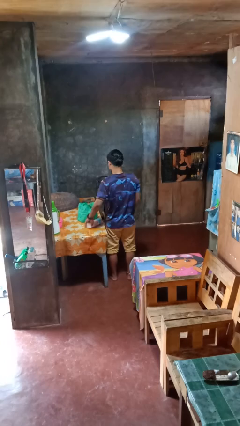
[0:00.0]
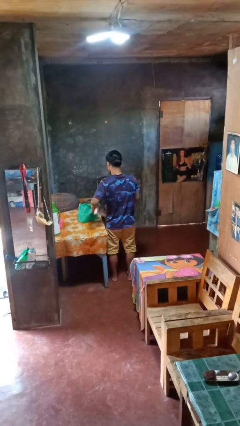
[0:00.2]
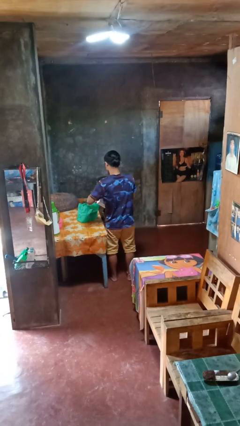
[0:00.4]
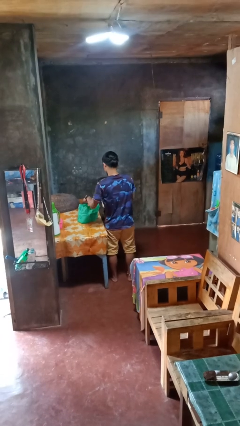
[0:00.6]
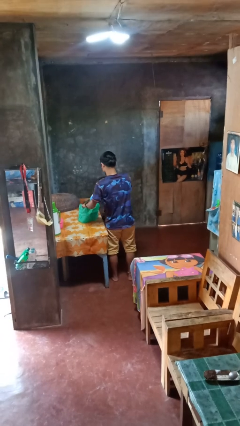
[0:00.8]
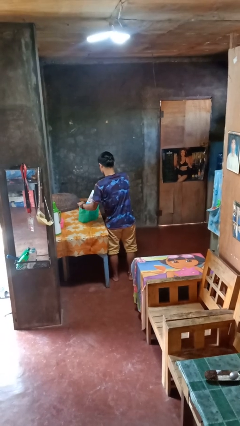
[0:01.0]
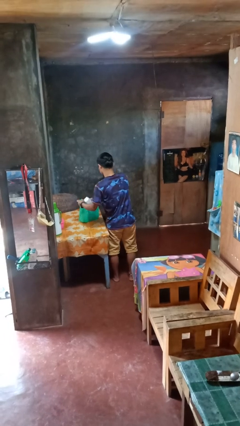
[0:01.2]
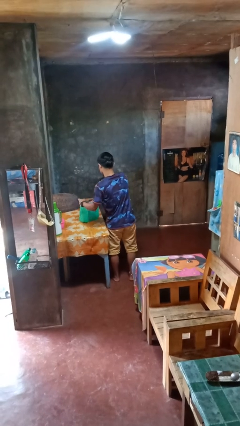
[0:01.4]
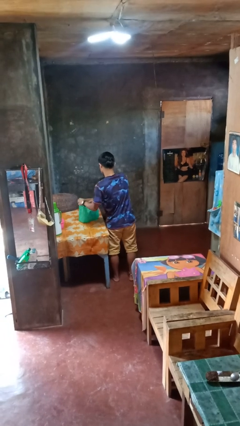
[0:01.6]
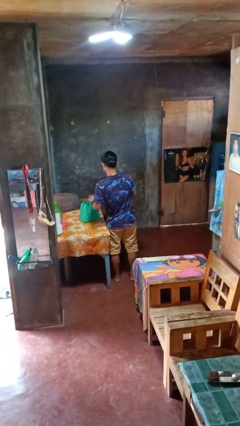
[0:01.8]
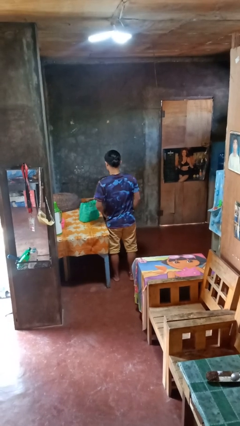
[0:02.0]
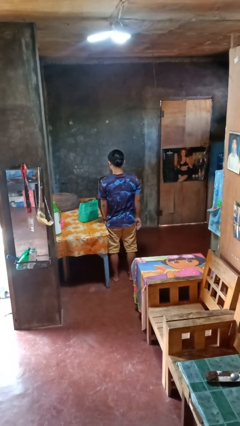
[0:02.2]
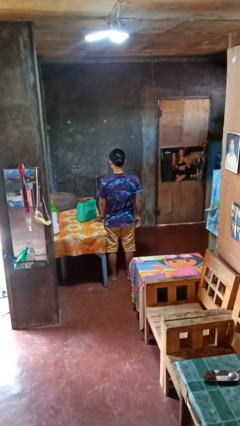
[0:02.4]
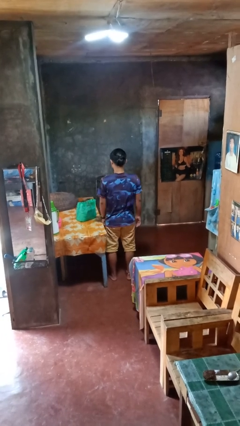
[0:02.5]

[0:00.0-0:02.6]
person puts object into bag

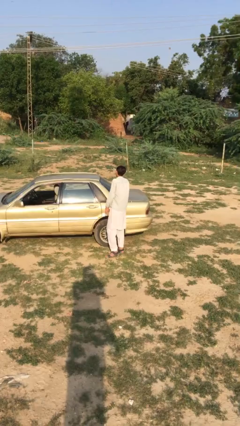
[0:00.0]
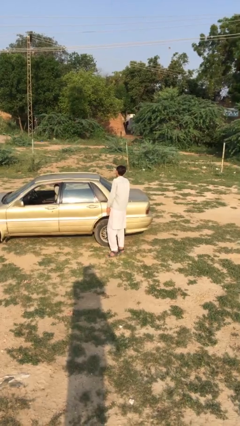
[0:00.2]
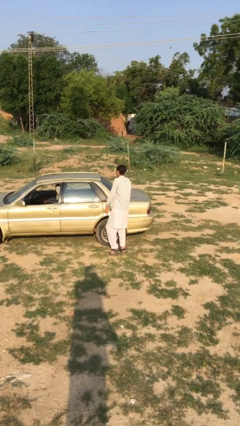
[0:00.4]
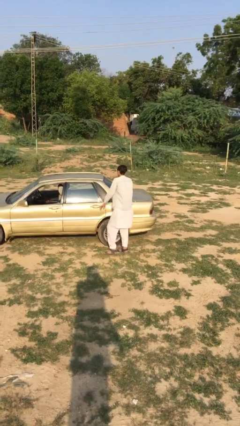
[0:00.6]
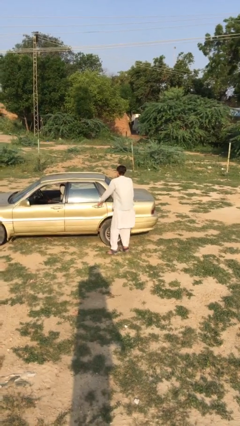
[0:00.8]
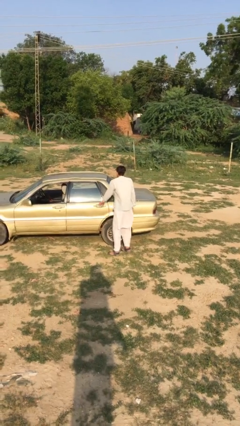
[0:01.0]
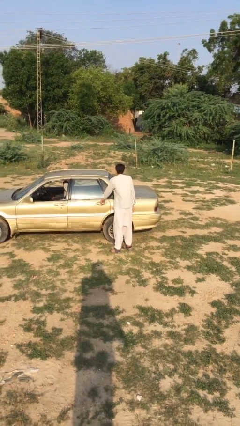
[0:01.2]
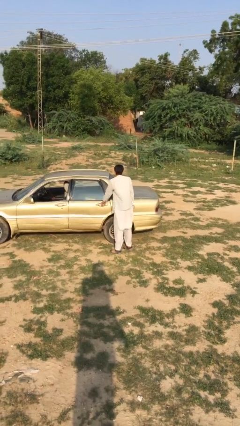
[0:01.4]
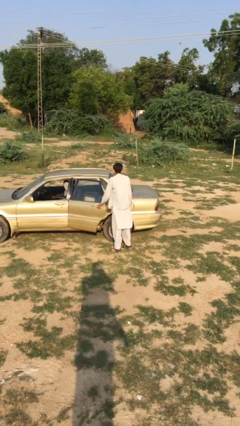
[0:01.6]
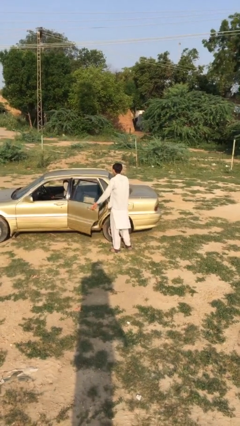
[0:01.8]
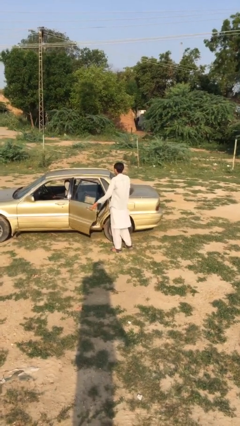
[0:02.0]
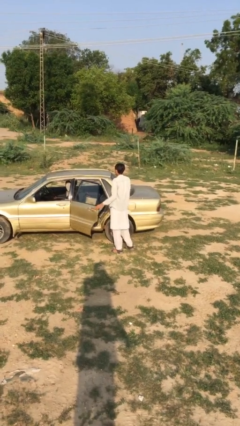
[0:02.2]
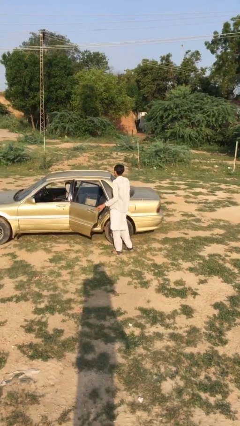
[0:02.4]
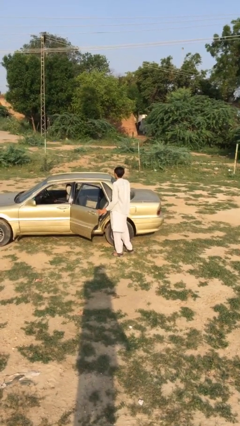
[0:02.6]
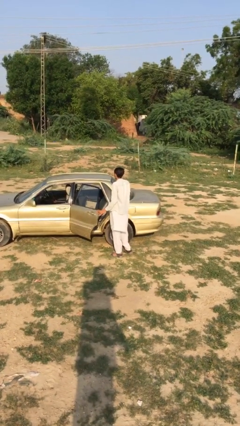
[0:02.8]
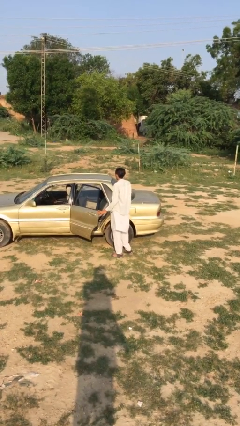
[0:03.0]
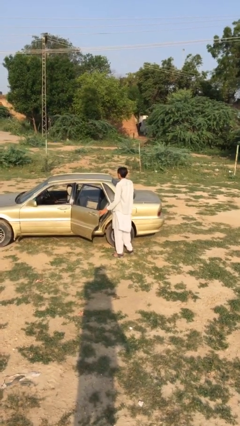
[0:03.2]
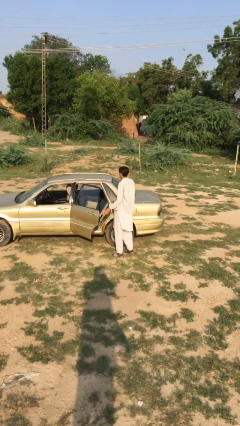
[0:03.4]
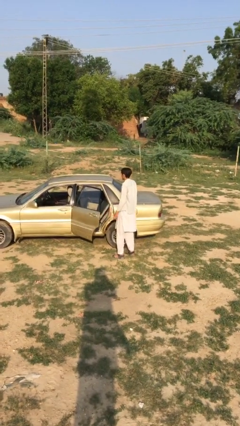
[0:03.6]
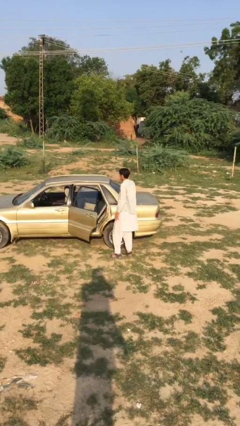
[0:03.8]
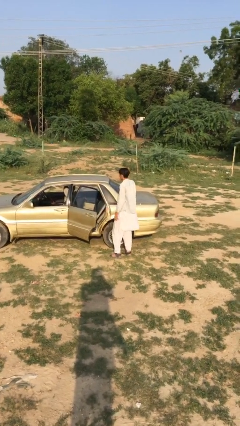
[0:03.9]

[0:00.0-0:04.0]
person opens car door

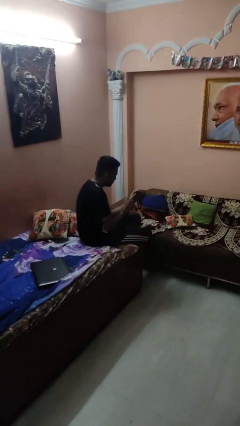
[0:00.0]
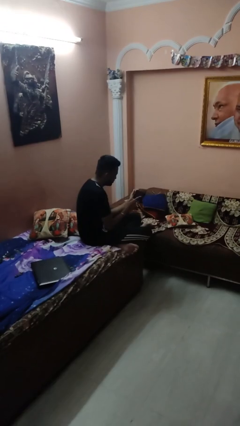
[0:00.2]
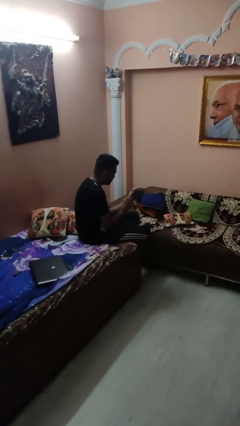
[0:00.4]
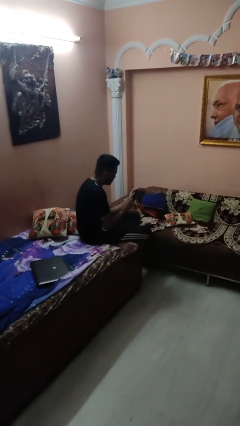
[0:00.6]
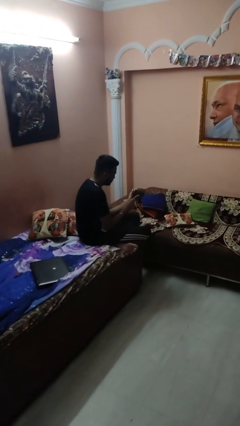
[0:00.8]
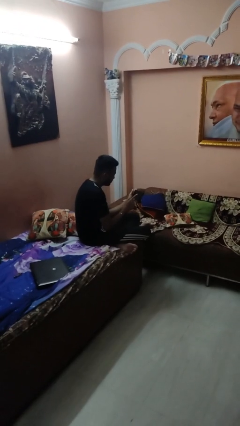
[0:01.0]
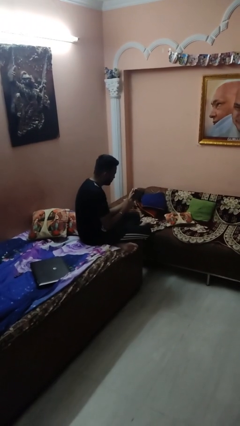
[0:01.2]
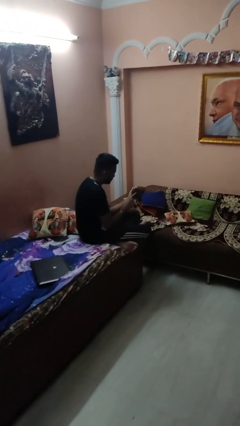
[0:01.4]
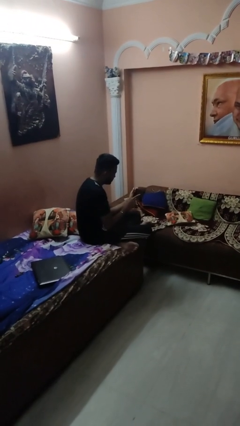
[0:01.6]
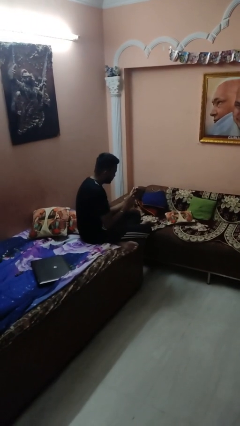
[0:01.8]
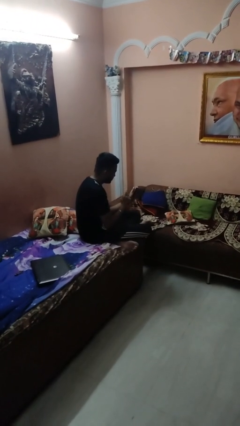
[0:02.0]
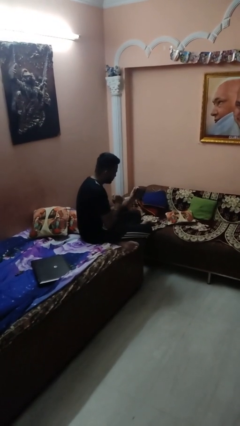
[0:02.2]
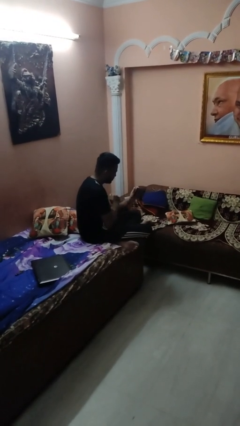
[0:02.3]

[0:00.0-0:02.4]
person interacts with tablet

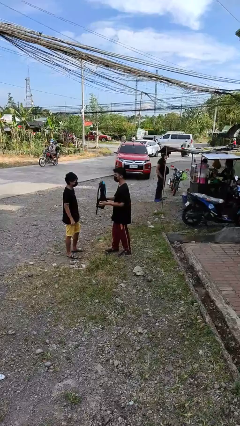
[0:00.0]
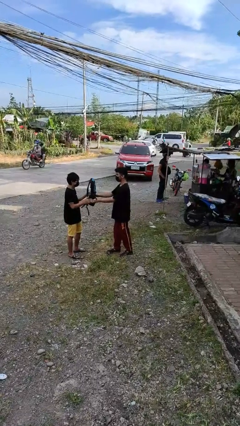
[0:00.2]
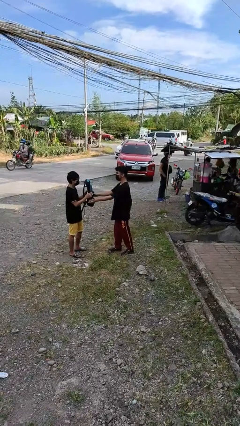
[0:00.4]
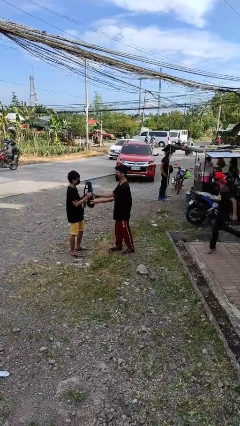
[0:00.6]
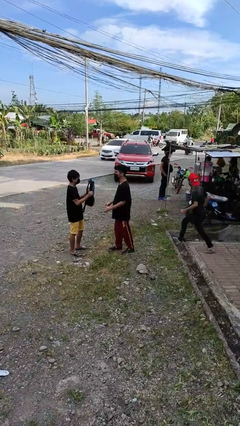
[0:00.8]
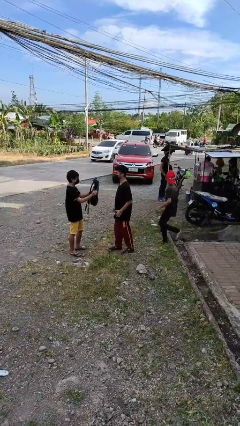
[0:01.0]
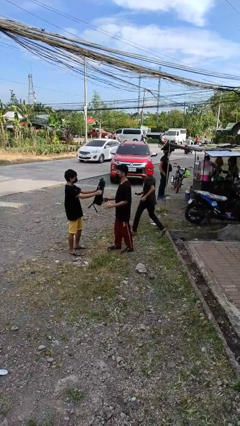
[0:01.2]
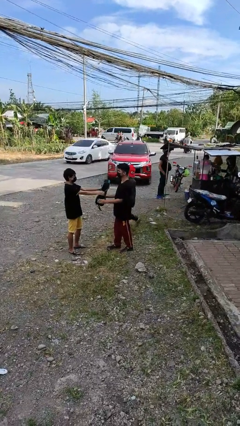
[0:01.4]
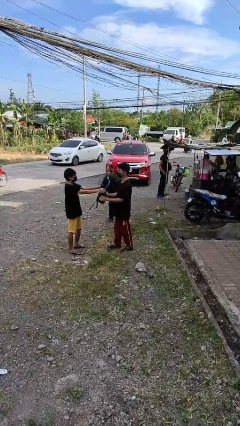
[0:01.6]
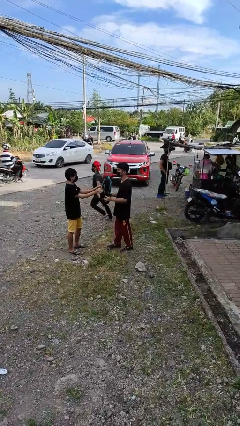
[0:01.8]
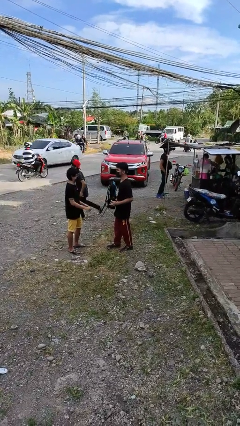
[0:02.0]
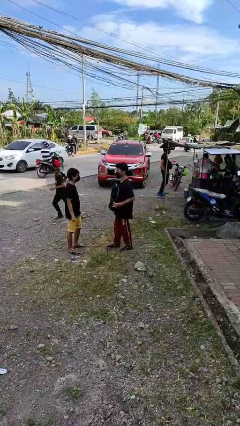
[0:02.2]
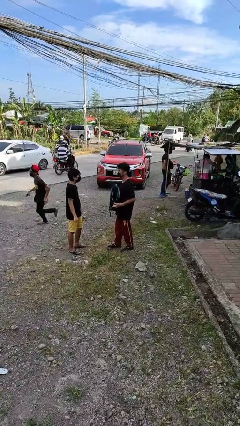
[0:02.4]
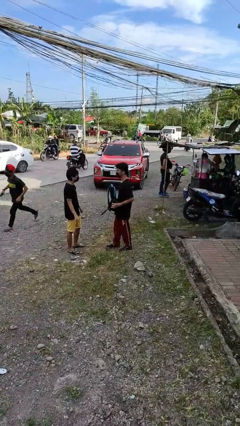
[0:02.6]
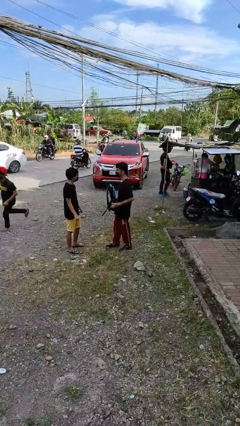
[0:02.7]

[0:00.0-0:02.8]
person transfers object to person

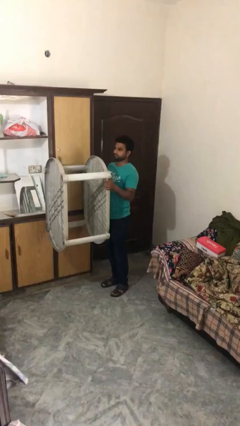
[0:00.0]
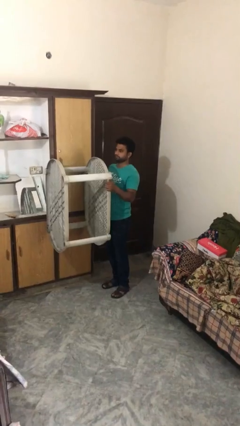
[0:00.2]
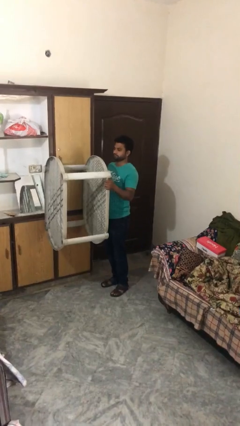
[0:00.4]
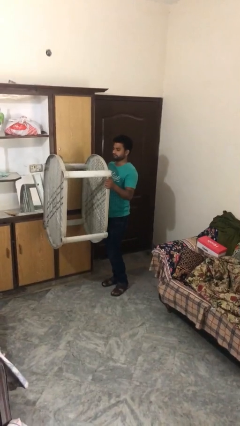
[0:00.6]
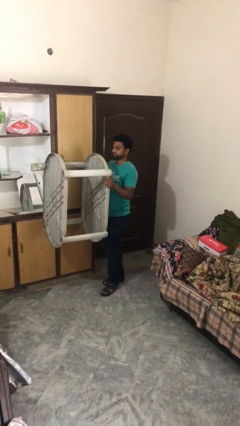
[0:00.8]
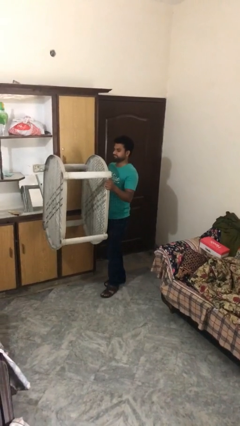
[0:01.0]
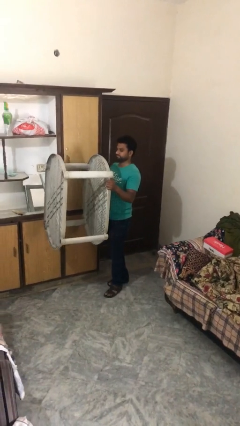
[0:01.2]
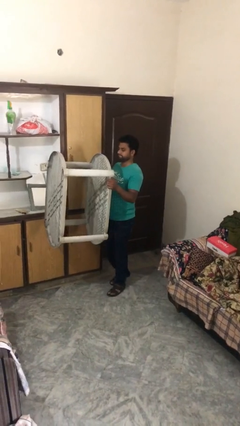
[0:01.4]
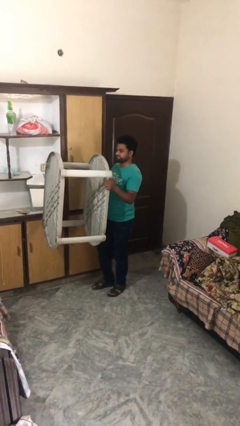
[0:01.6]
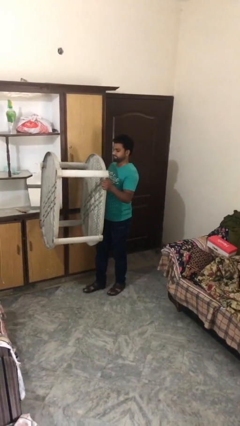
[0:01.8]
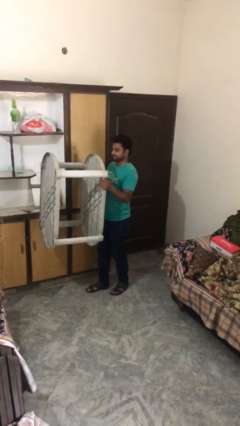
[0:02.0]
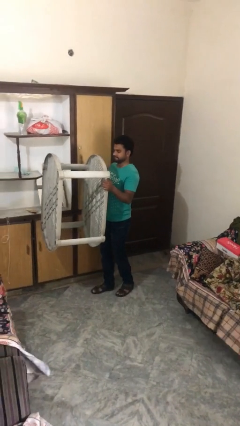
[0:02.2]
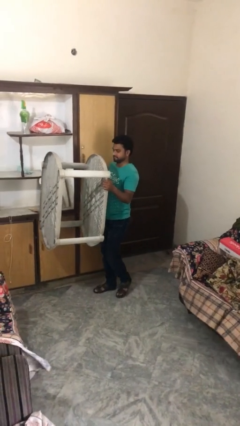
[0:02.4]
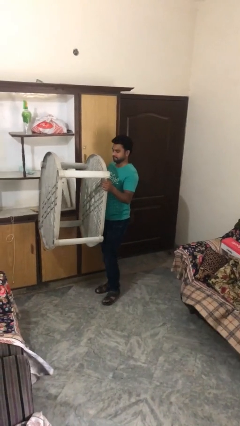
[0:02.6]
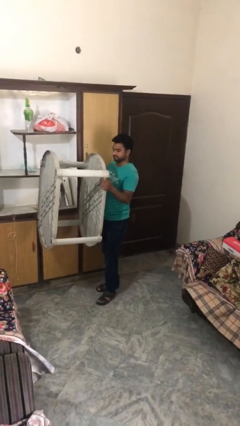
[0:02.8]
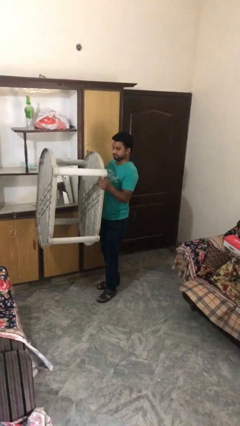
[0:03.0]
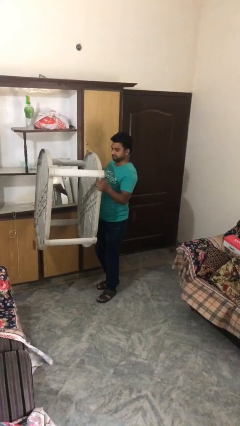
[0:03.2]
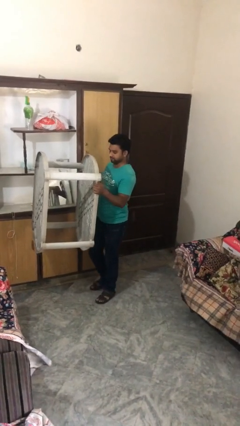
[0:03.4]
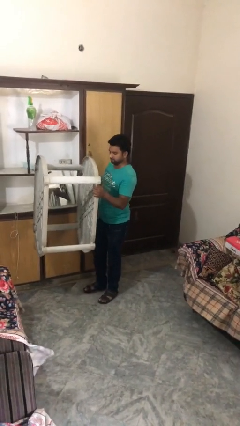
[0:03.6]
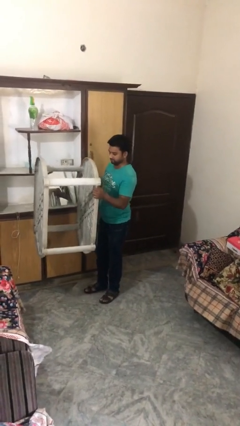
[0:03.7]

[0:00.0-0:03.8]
person carries heavy object

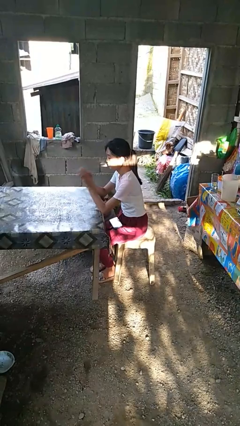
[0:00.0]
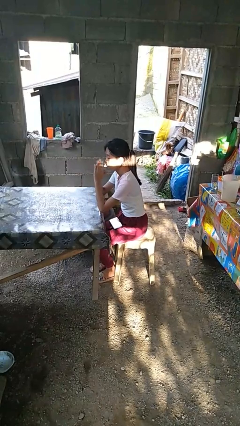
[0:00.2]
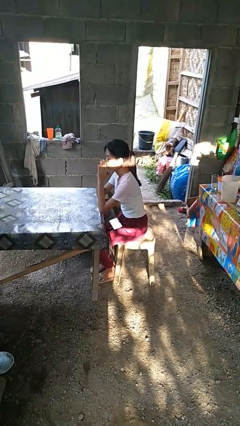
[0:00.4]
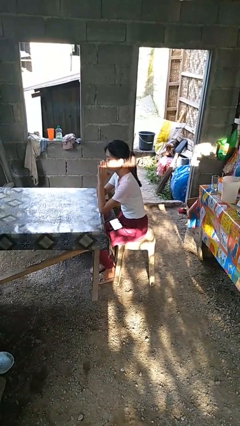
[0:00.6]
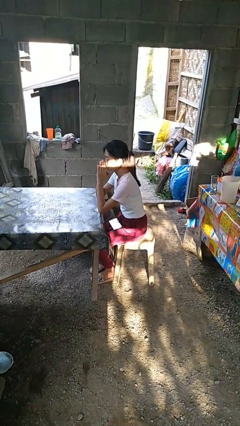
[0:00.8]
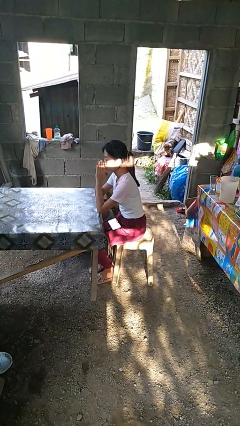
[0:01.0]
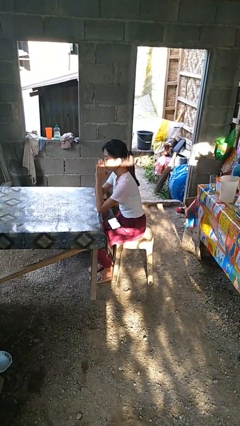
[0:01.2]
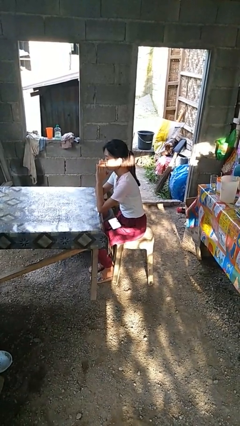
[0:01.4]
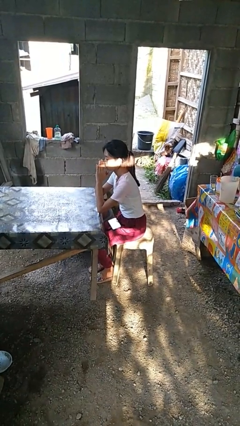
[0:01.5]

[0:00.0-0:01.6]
person prays
